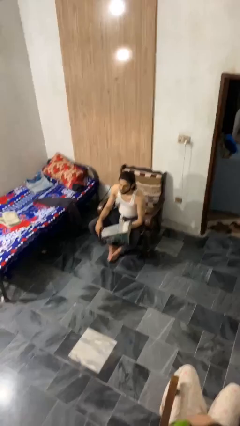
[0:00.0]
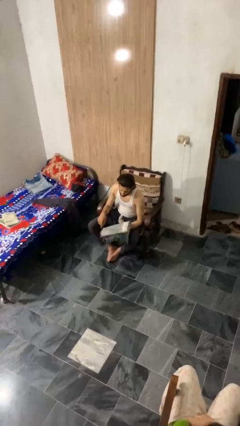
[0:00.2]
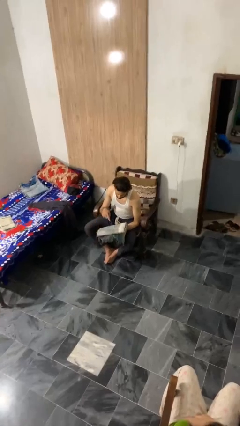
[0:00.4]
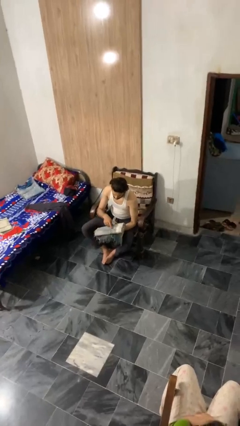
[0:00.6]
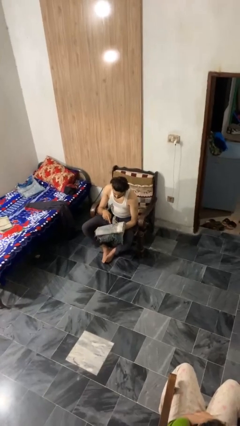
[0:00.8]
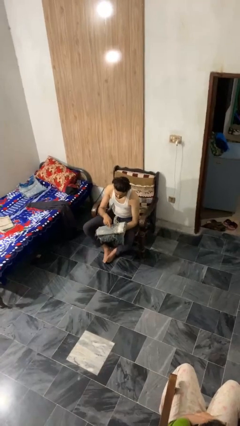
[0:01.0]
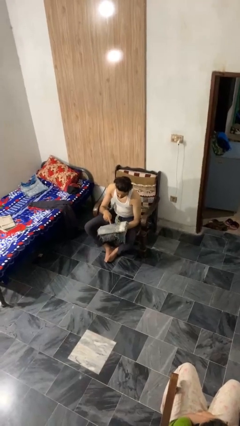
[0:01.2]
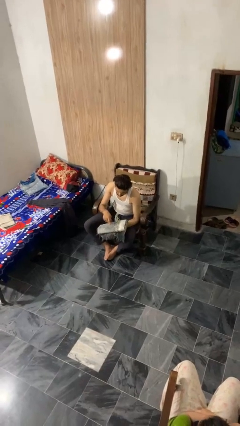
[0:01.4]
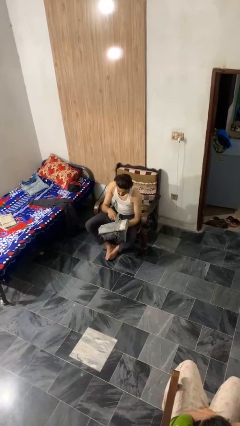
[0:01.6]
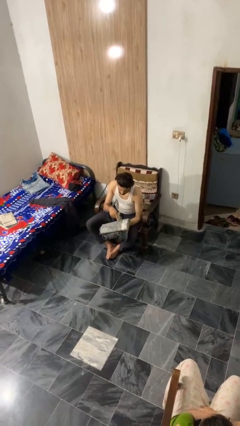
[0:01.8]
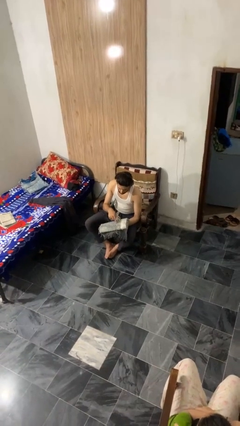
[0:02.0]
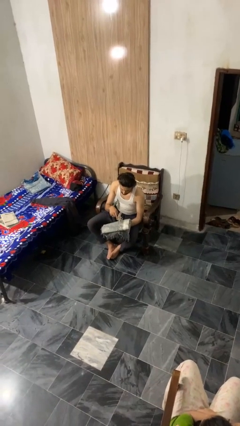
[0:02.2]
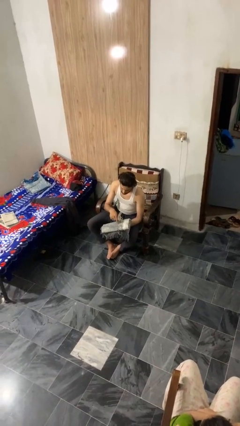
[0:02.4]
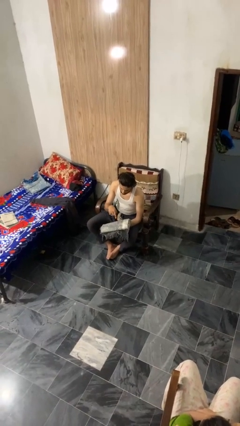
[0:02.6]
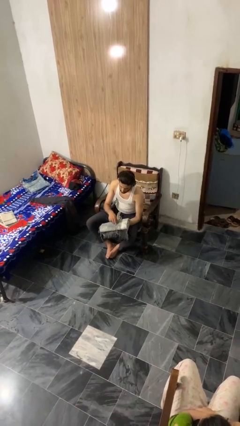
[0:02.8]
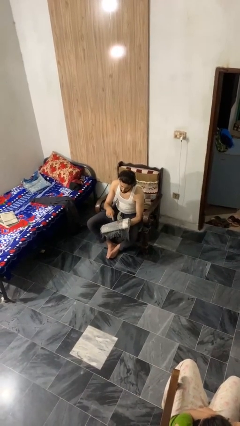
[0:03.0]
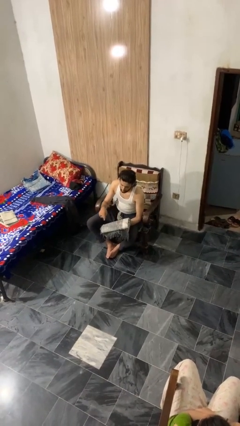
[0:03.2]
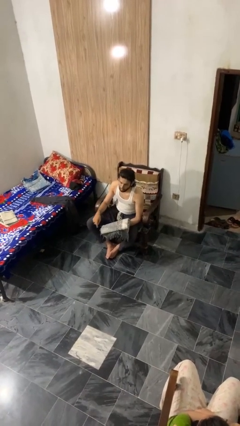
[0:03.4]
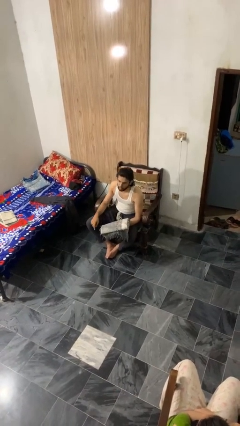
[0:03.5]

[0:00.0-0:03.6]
person taps object with finger

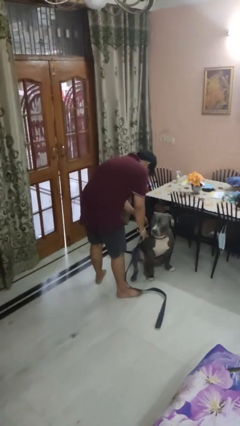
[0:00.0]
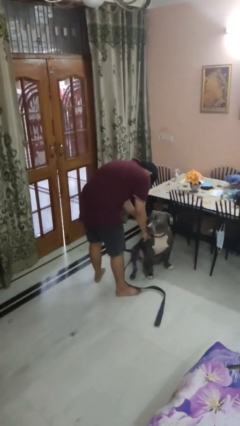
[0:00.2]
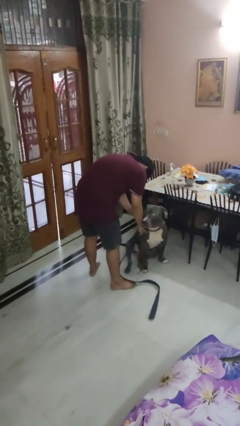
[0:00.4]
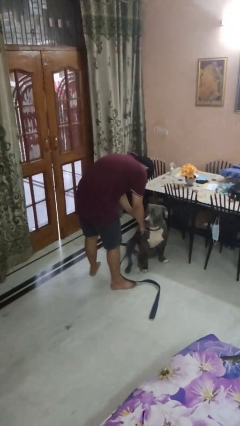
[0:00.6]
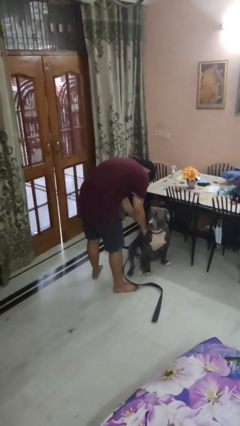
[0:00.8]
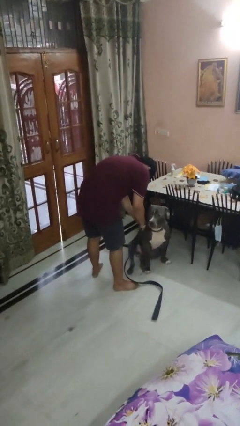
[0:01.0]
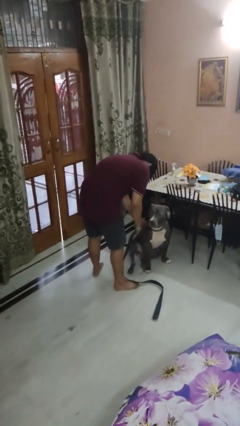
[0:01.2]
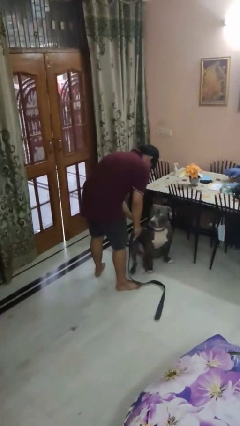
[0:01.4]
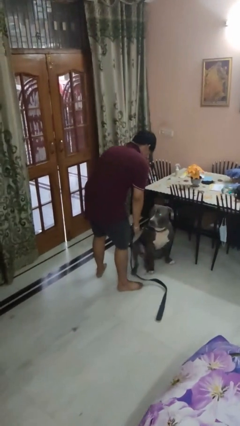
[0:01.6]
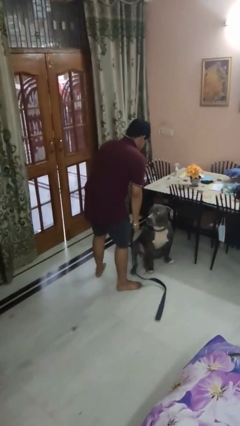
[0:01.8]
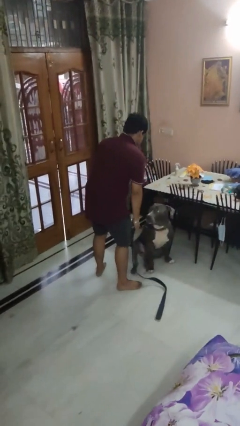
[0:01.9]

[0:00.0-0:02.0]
person attaches leash to dog

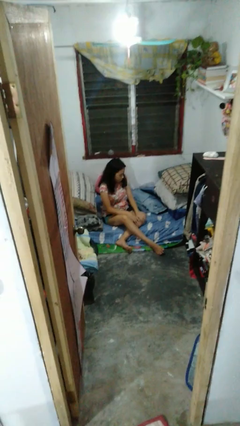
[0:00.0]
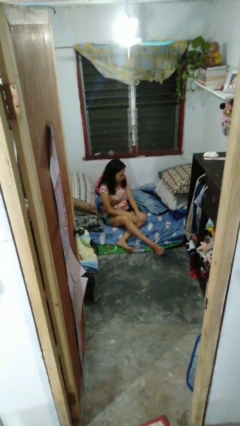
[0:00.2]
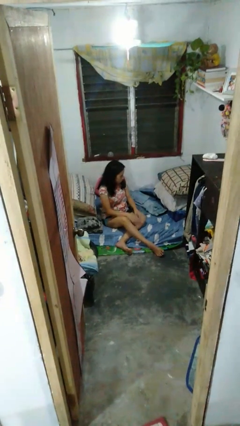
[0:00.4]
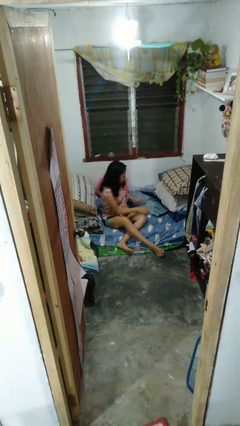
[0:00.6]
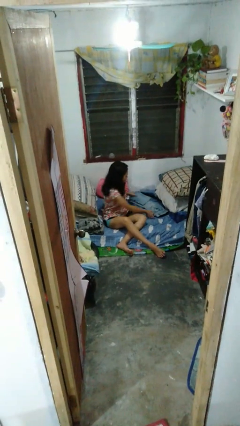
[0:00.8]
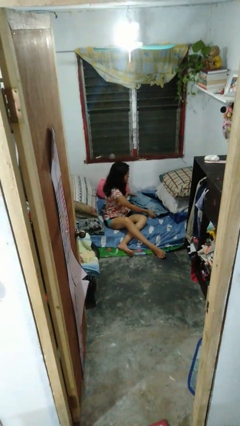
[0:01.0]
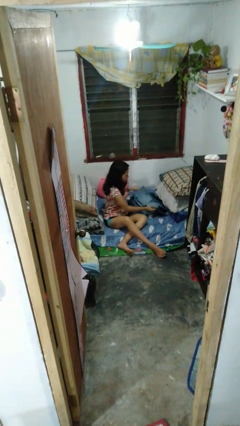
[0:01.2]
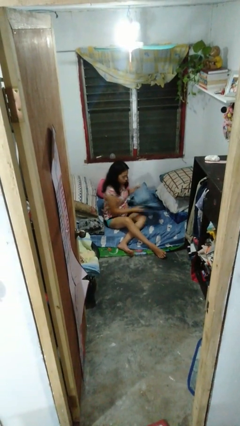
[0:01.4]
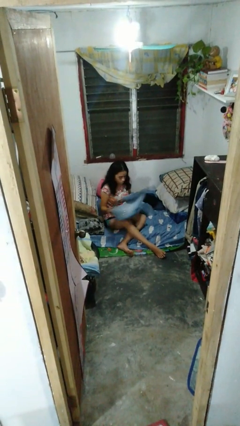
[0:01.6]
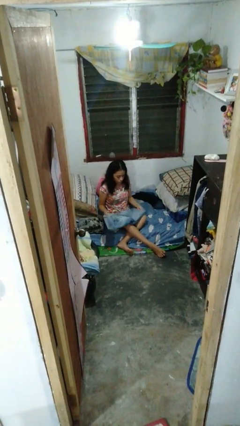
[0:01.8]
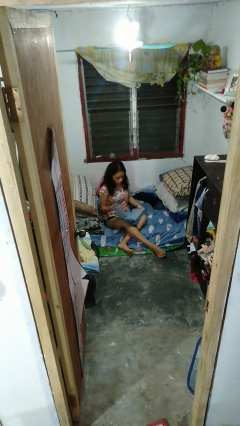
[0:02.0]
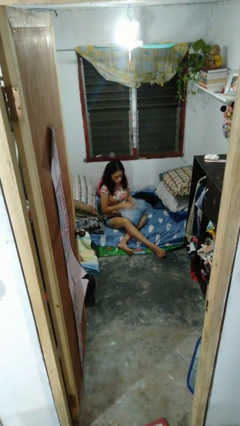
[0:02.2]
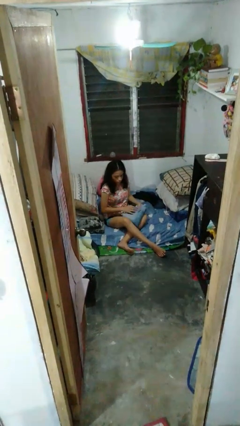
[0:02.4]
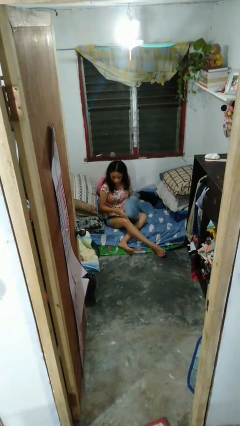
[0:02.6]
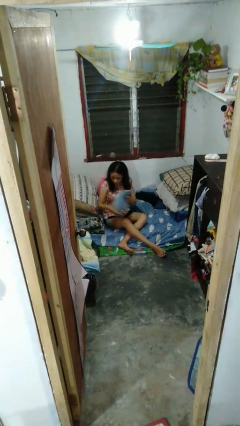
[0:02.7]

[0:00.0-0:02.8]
person folds pants

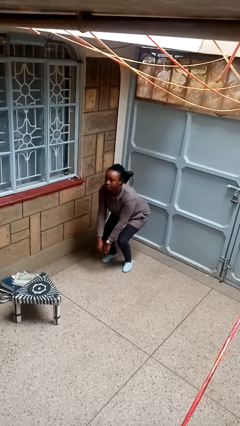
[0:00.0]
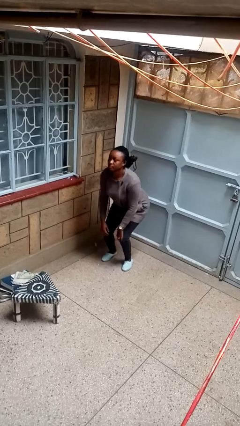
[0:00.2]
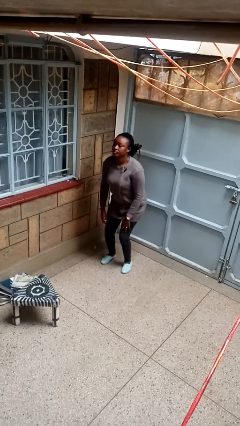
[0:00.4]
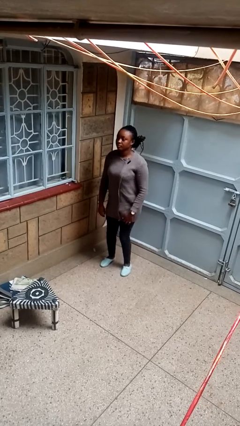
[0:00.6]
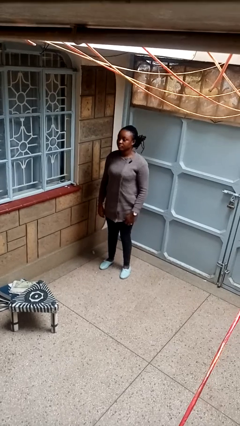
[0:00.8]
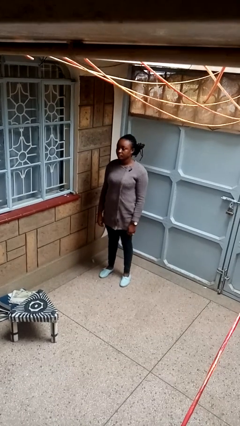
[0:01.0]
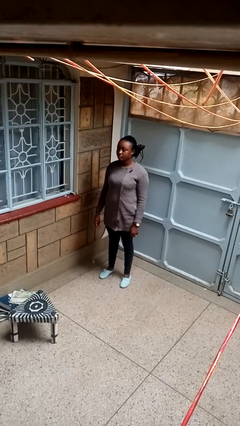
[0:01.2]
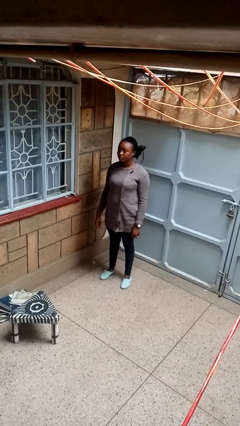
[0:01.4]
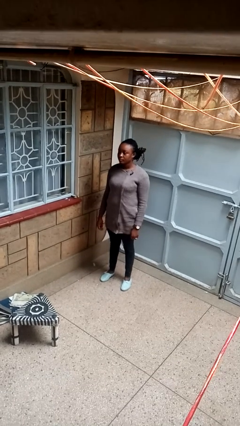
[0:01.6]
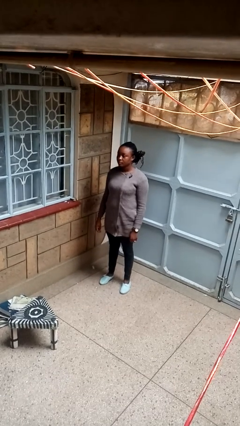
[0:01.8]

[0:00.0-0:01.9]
person stands up

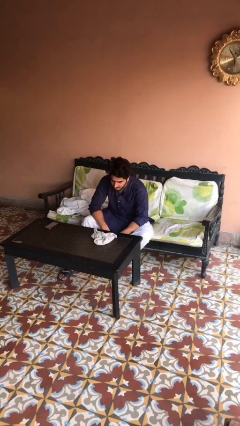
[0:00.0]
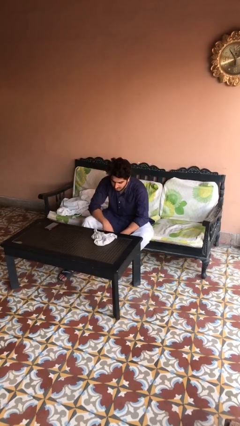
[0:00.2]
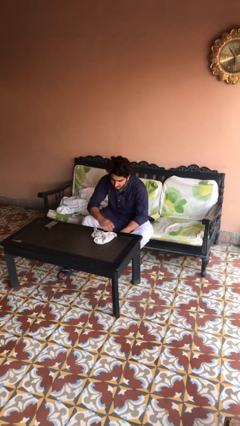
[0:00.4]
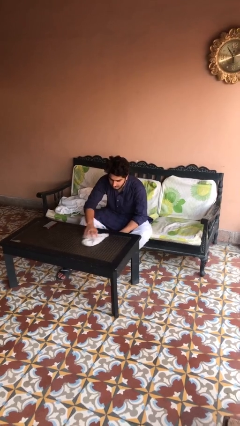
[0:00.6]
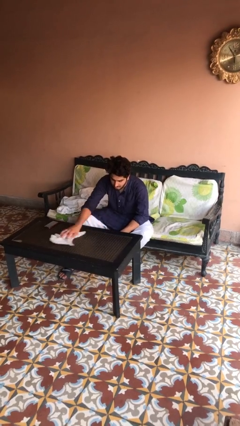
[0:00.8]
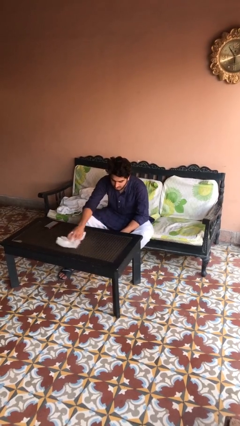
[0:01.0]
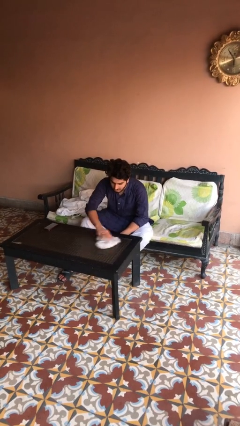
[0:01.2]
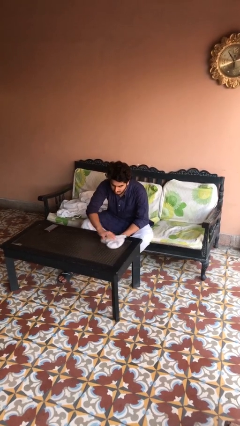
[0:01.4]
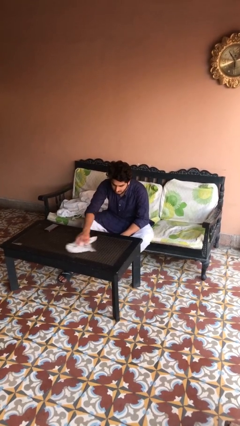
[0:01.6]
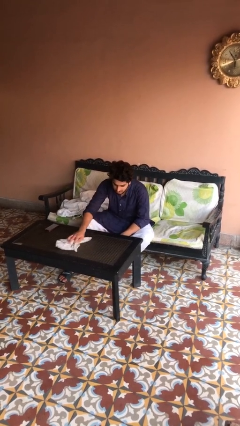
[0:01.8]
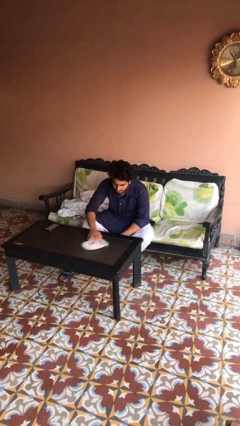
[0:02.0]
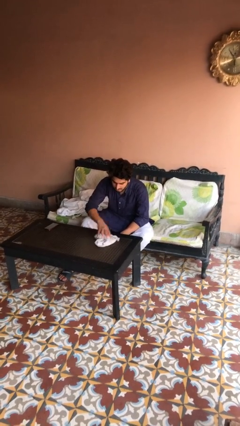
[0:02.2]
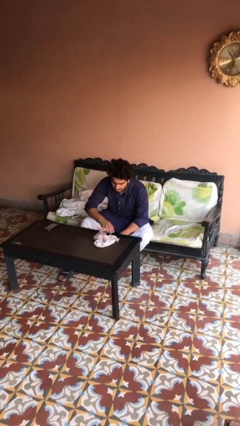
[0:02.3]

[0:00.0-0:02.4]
person cleans table with rag

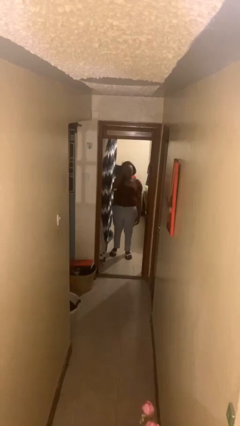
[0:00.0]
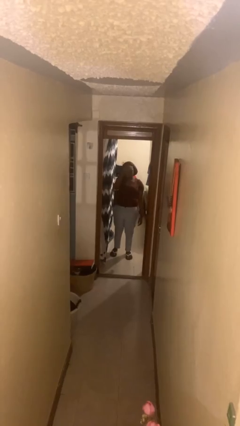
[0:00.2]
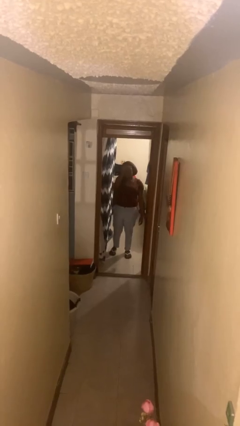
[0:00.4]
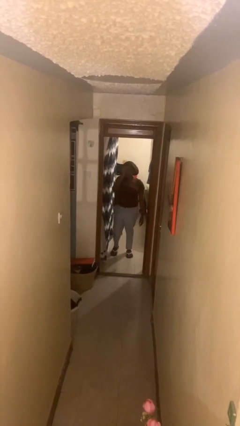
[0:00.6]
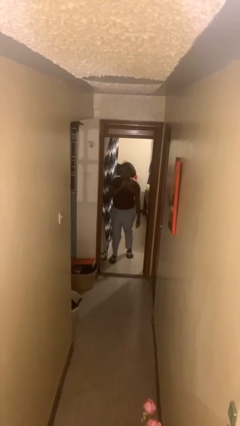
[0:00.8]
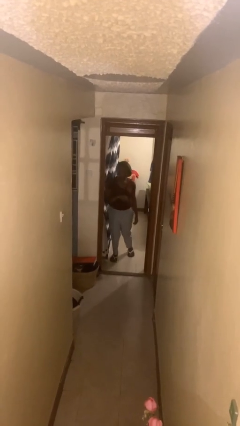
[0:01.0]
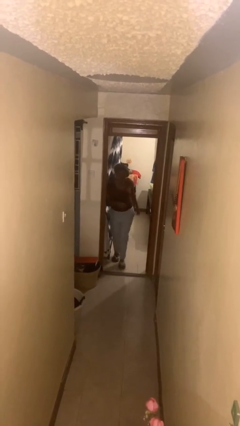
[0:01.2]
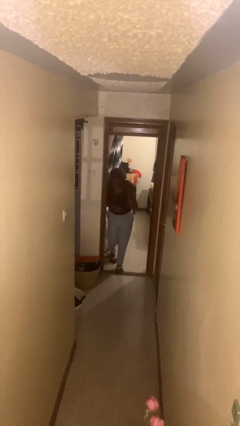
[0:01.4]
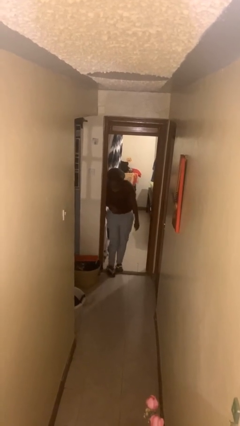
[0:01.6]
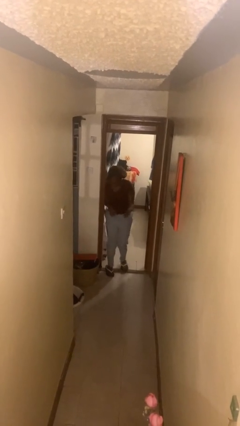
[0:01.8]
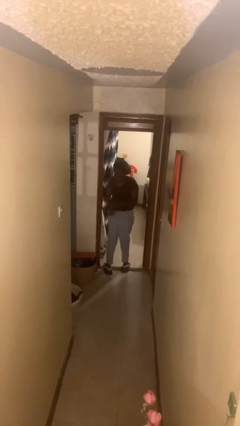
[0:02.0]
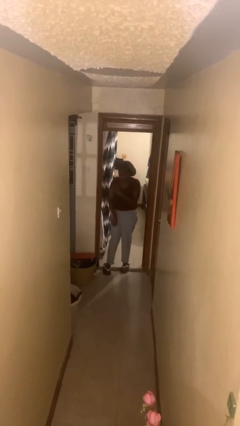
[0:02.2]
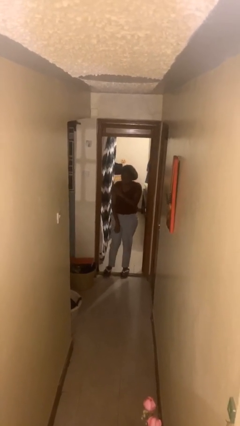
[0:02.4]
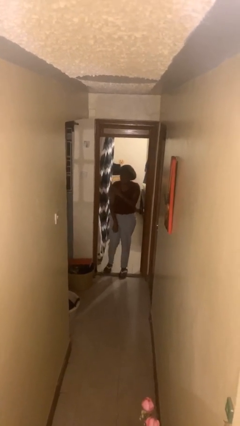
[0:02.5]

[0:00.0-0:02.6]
person bumps into wall

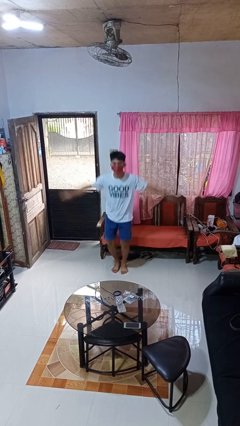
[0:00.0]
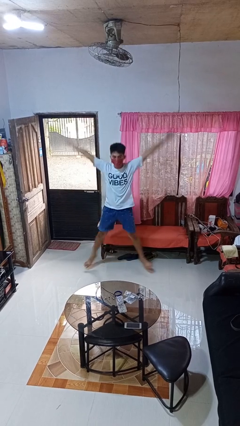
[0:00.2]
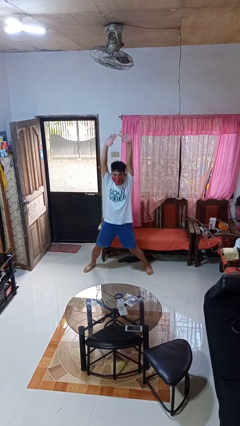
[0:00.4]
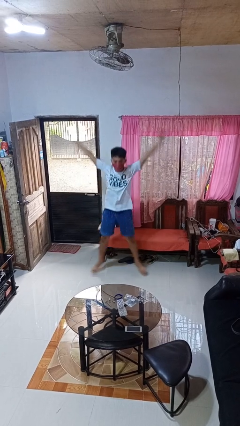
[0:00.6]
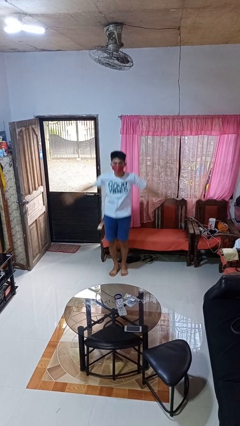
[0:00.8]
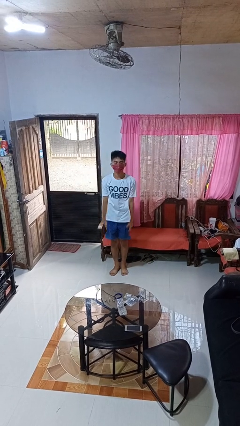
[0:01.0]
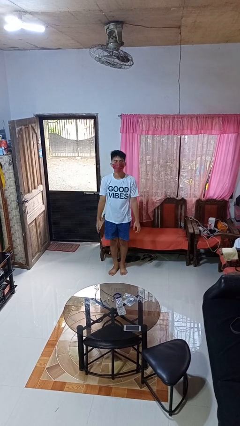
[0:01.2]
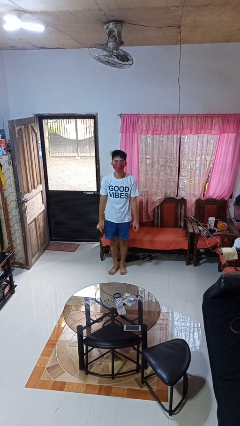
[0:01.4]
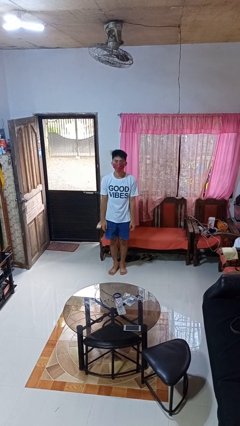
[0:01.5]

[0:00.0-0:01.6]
person exercises with jumping jacks

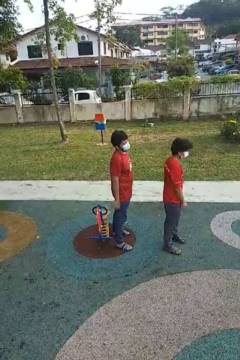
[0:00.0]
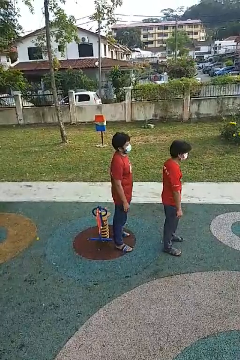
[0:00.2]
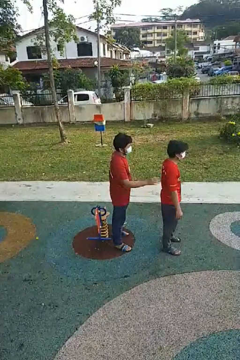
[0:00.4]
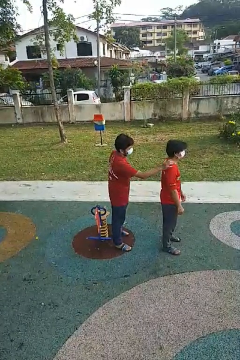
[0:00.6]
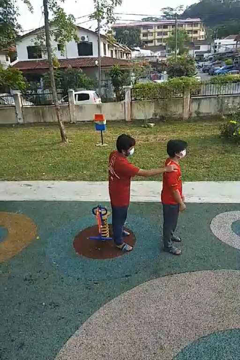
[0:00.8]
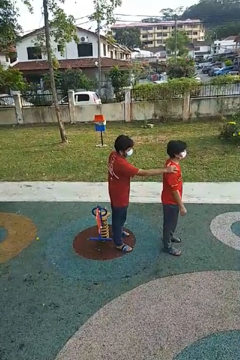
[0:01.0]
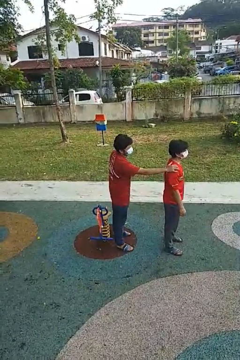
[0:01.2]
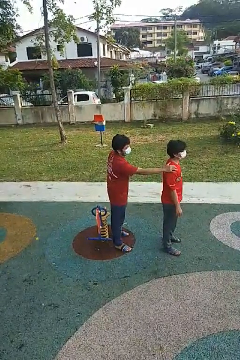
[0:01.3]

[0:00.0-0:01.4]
person grabs person by shoulder
